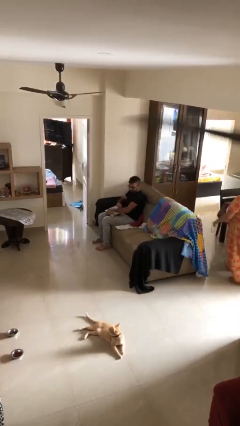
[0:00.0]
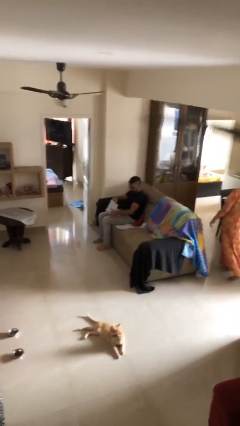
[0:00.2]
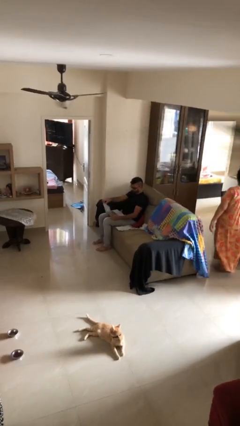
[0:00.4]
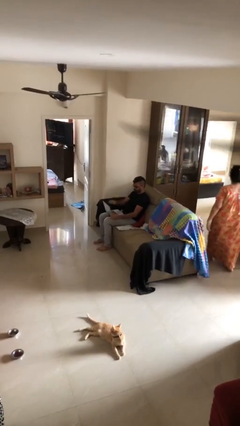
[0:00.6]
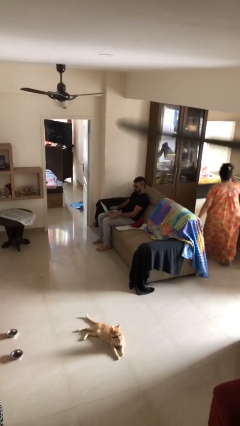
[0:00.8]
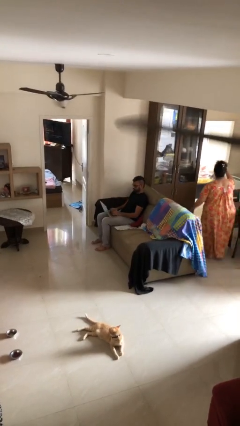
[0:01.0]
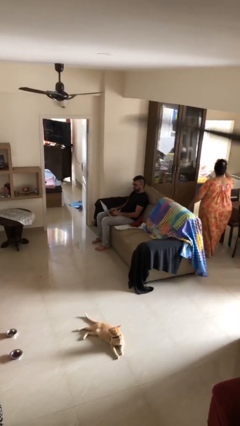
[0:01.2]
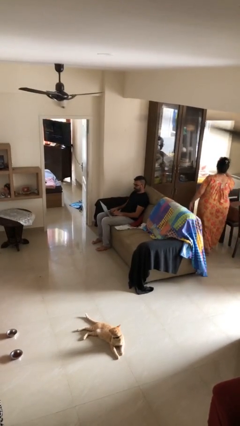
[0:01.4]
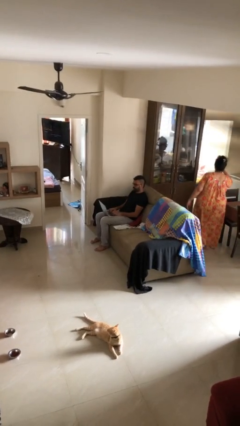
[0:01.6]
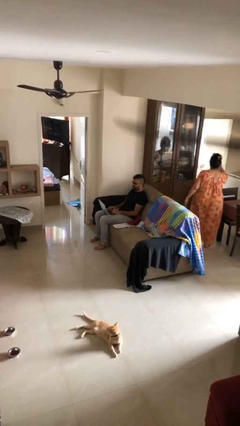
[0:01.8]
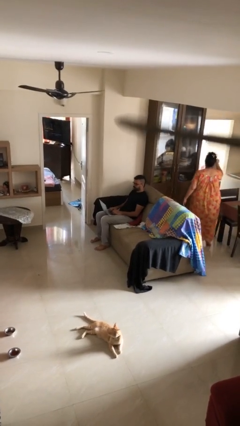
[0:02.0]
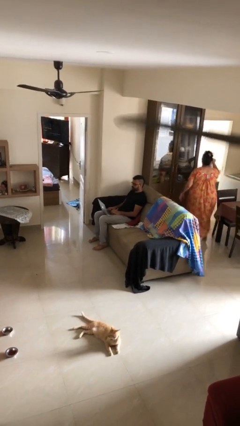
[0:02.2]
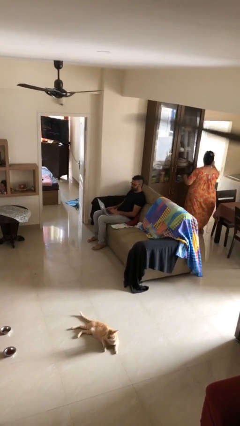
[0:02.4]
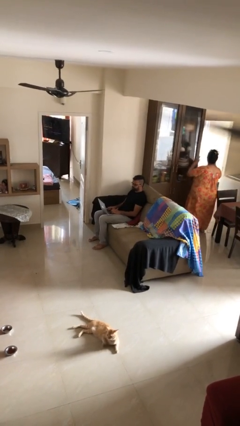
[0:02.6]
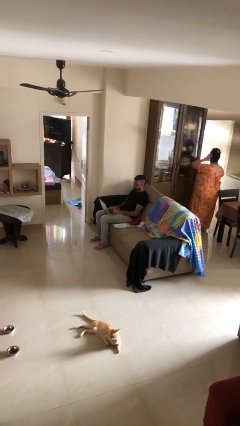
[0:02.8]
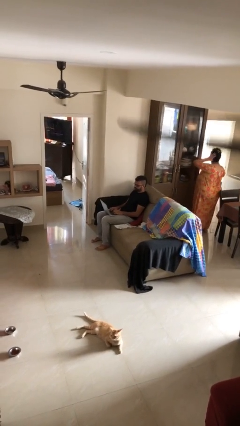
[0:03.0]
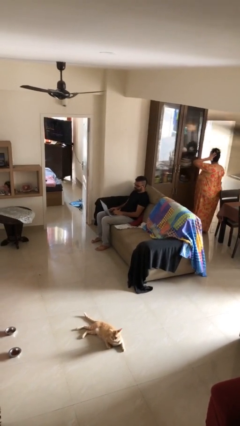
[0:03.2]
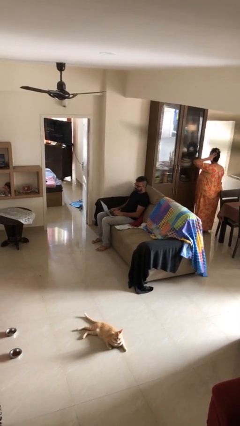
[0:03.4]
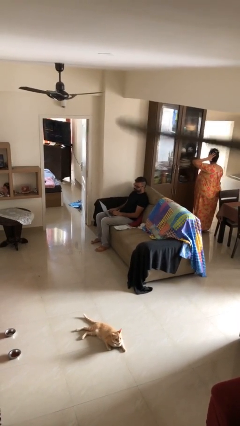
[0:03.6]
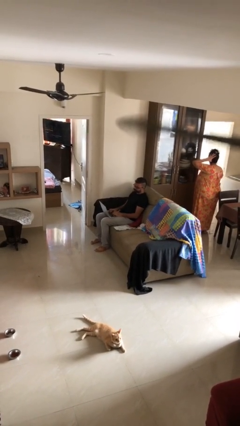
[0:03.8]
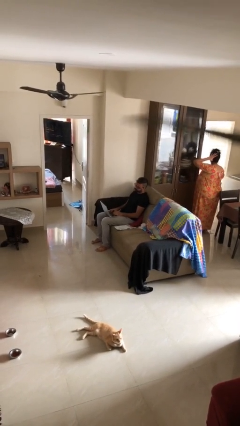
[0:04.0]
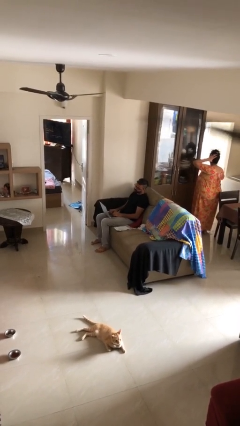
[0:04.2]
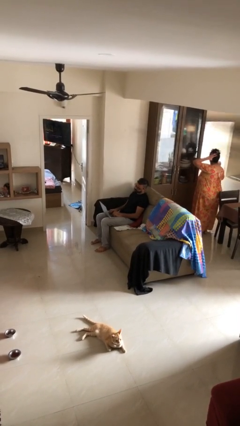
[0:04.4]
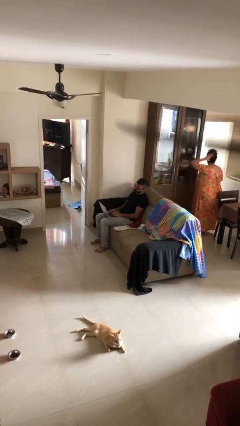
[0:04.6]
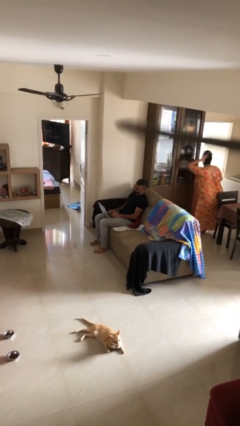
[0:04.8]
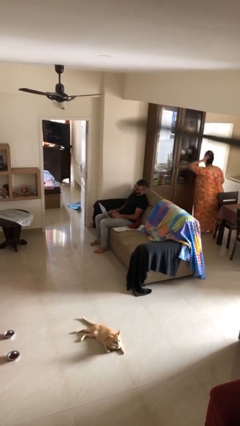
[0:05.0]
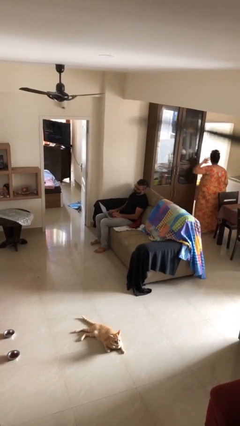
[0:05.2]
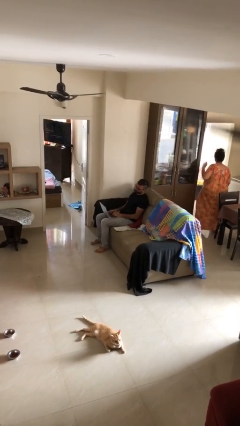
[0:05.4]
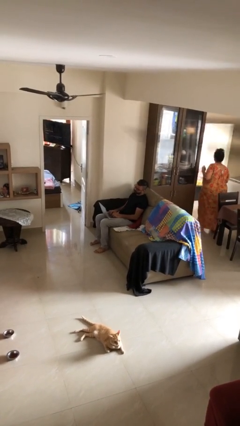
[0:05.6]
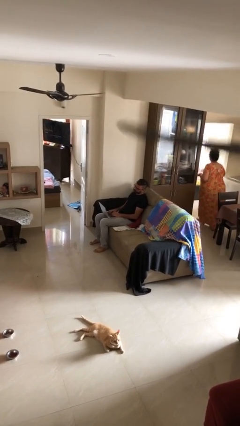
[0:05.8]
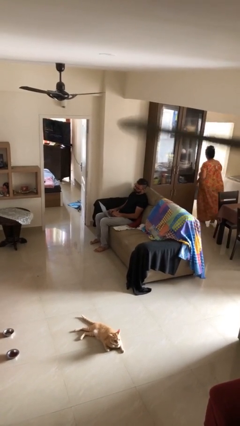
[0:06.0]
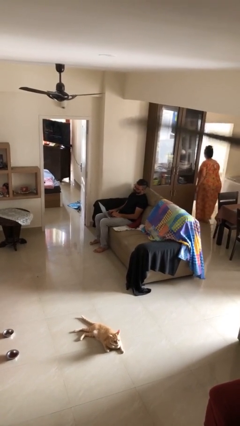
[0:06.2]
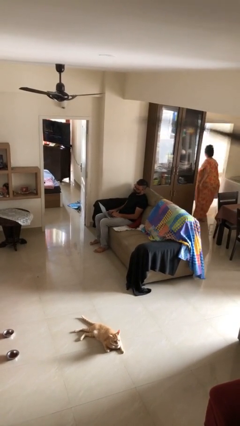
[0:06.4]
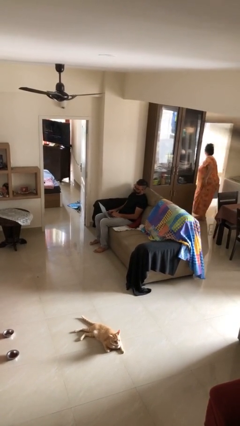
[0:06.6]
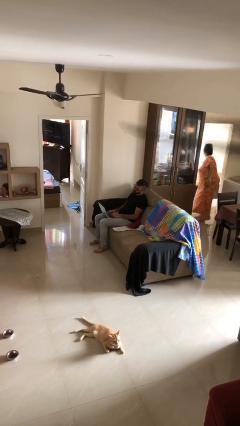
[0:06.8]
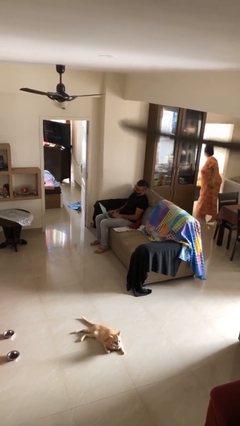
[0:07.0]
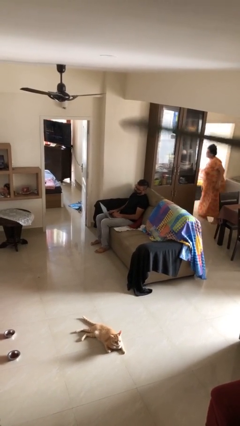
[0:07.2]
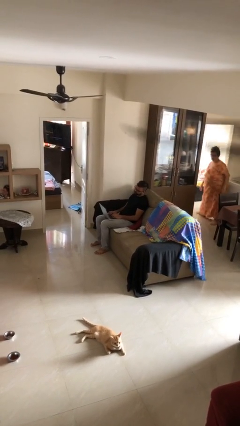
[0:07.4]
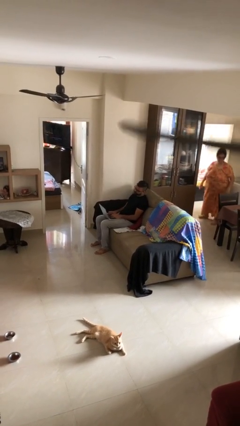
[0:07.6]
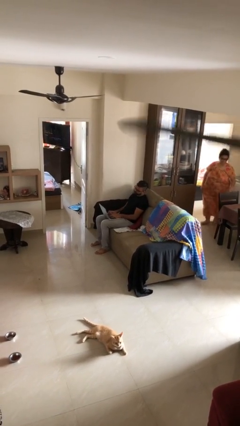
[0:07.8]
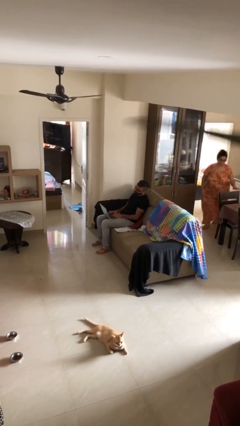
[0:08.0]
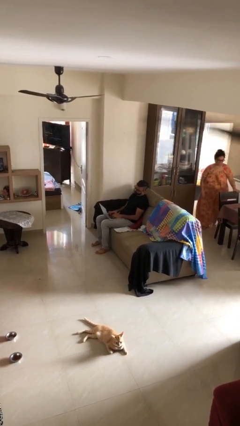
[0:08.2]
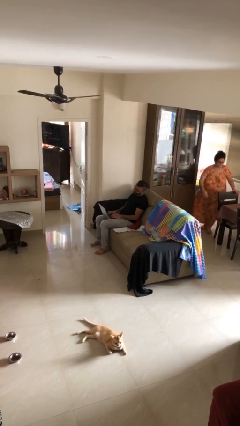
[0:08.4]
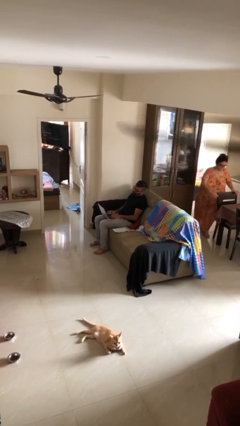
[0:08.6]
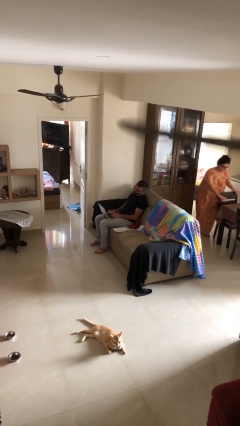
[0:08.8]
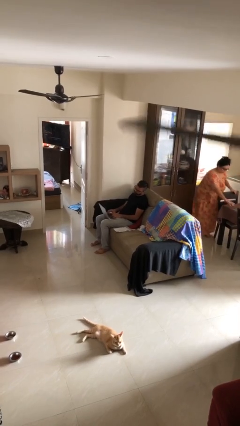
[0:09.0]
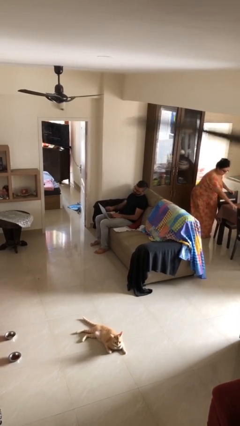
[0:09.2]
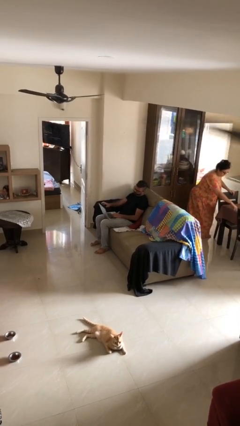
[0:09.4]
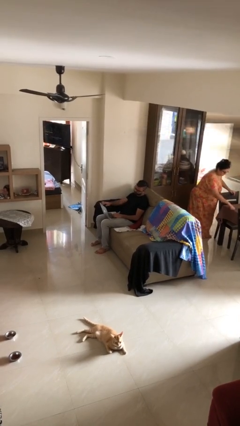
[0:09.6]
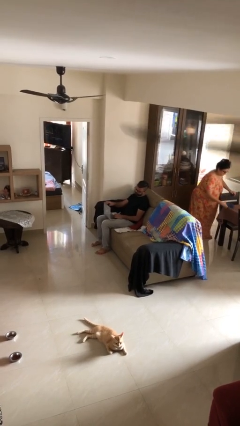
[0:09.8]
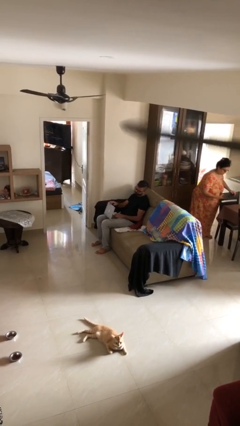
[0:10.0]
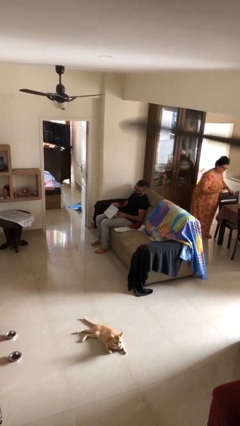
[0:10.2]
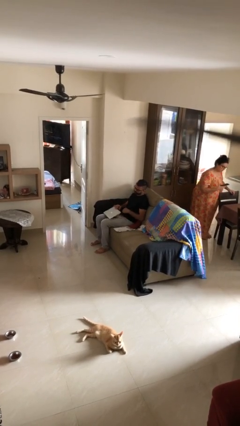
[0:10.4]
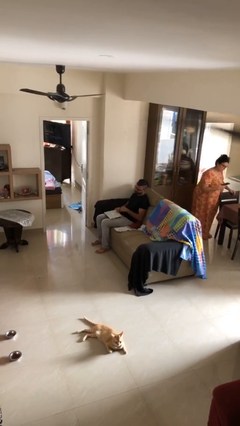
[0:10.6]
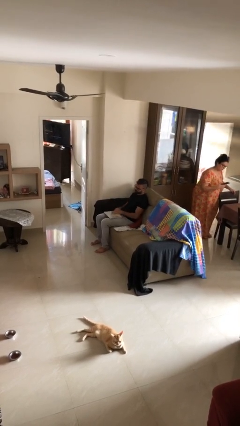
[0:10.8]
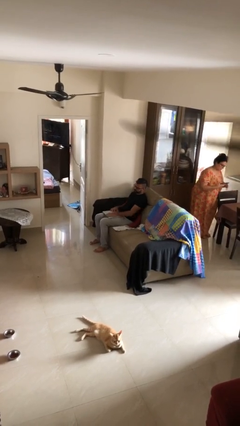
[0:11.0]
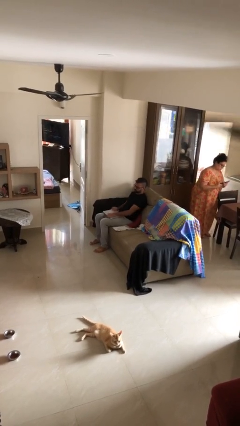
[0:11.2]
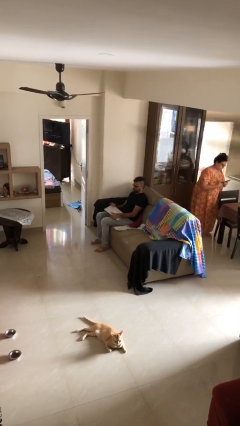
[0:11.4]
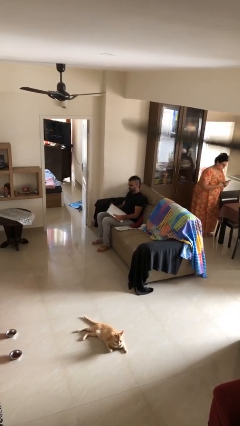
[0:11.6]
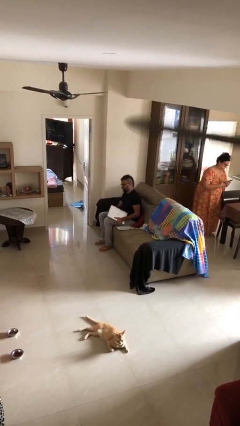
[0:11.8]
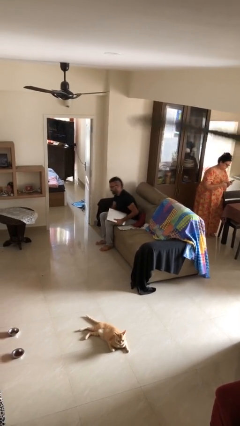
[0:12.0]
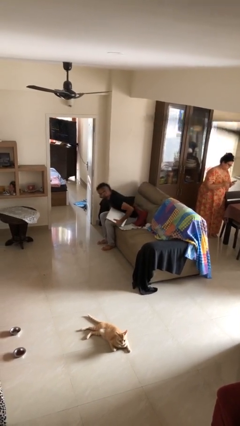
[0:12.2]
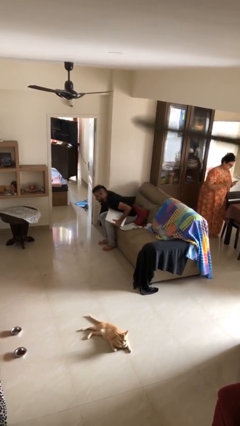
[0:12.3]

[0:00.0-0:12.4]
person interacts with laptop

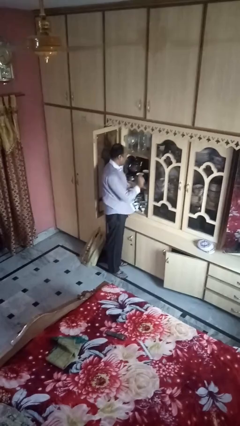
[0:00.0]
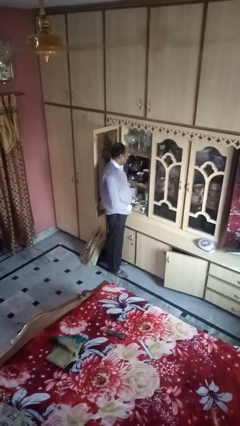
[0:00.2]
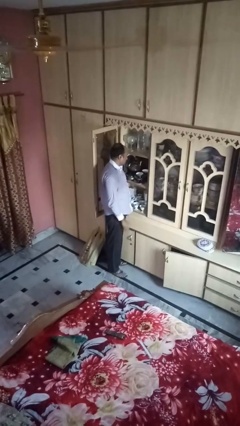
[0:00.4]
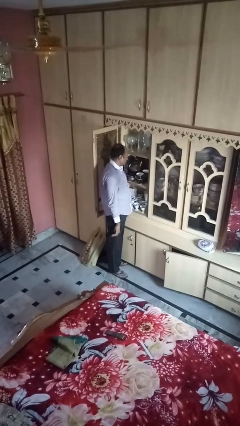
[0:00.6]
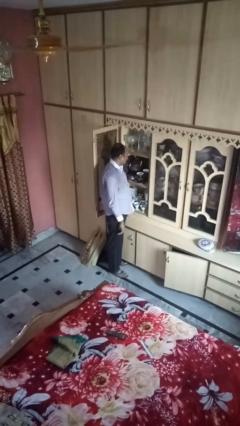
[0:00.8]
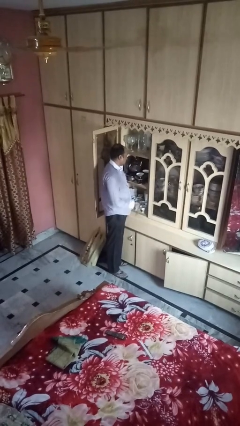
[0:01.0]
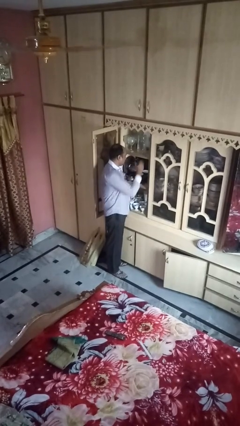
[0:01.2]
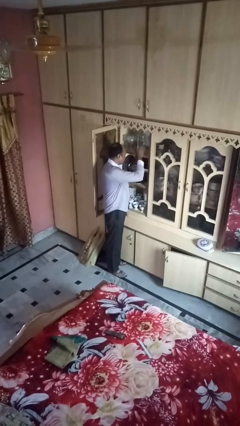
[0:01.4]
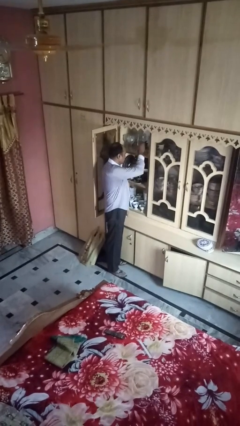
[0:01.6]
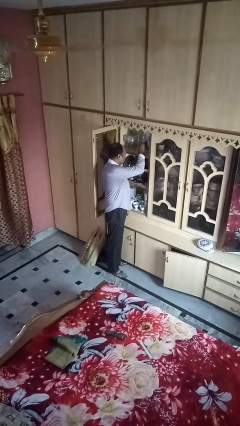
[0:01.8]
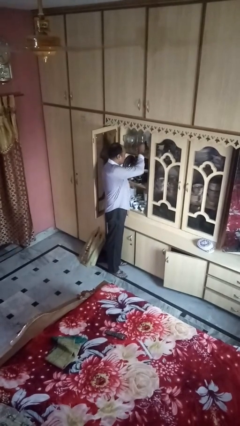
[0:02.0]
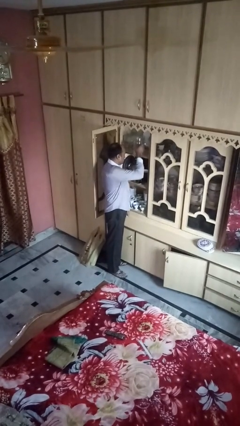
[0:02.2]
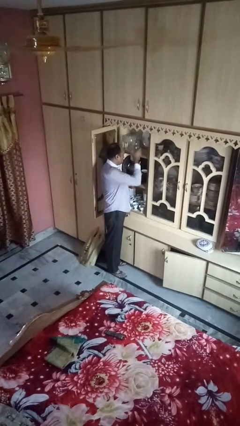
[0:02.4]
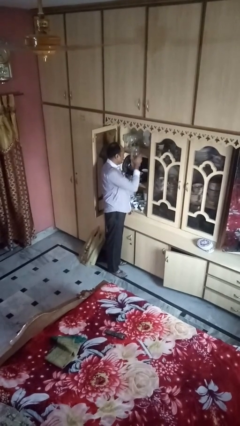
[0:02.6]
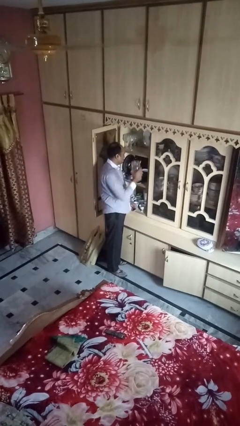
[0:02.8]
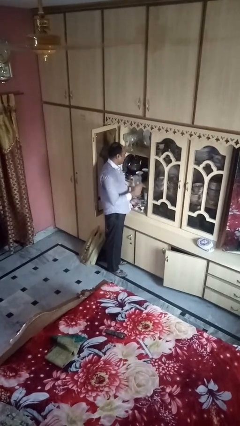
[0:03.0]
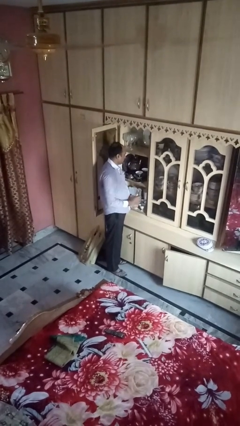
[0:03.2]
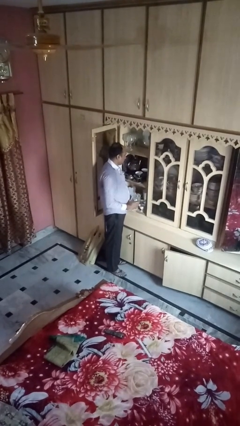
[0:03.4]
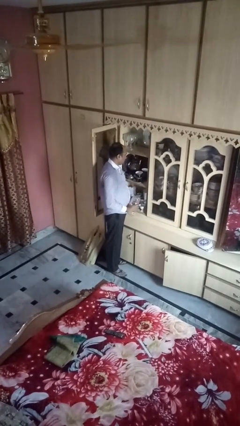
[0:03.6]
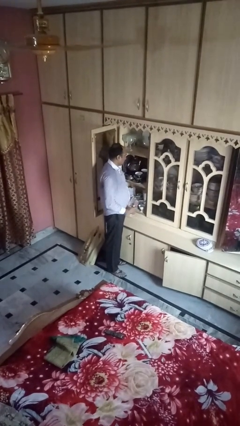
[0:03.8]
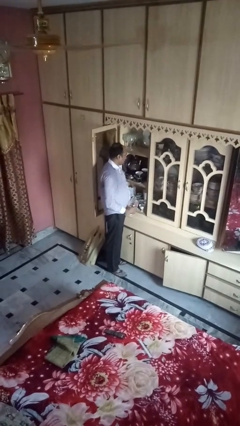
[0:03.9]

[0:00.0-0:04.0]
person picks up object from cabinet

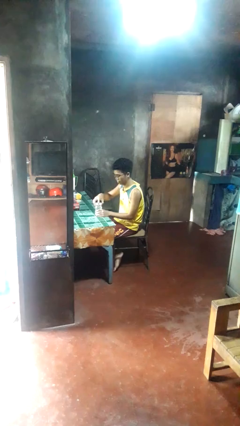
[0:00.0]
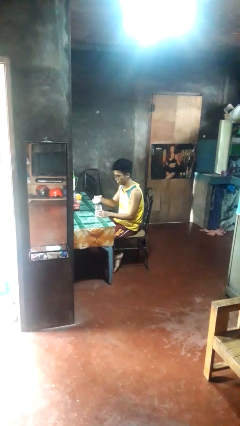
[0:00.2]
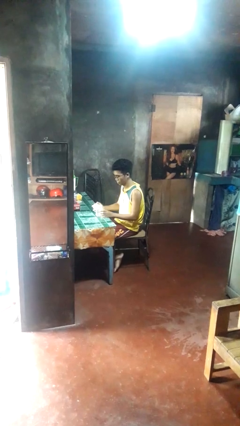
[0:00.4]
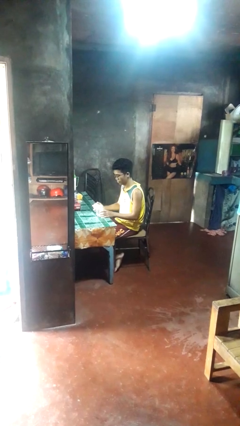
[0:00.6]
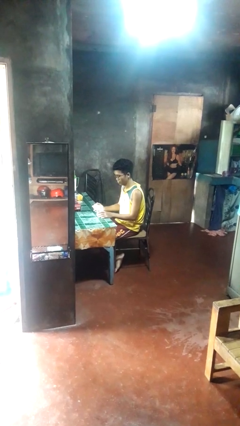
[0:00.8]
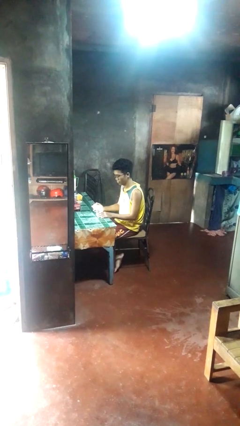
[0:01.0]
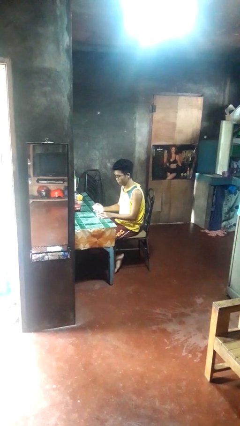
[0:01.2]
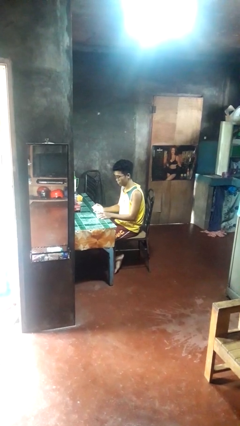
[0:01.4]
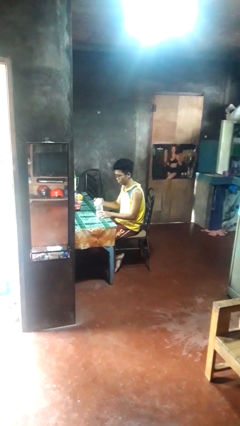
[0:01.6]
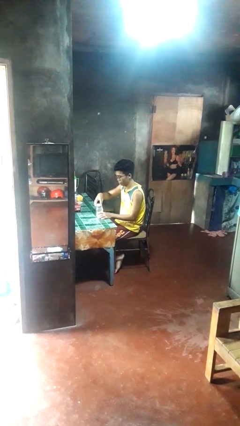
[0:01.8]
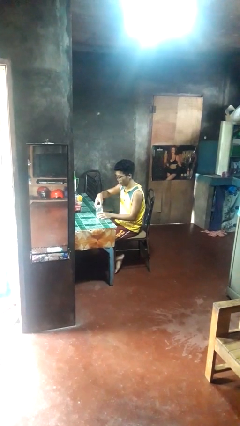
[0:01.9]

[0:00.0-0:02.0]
person opens jar
